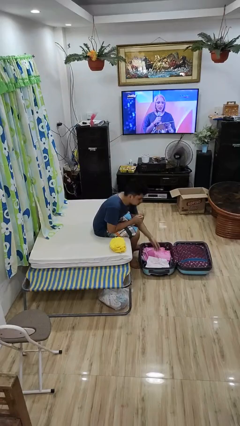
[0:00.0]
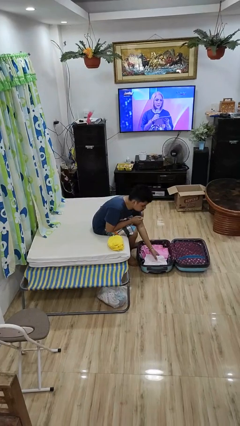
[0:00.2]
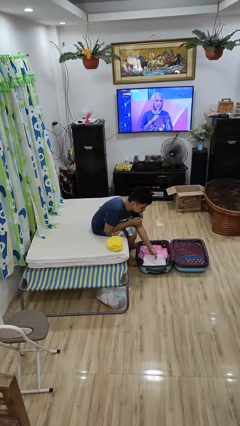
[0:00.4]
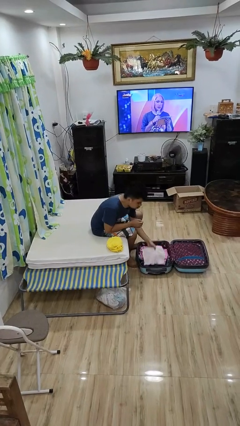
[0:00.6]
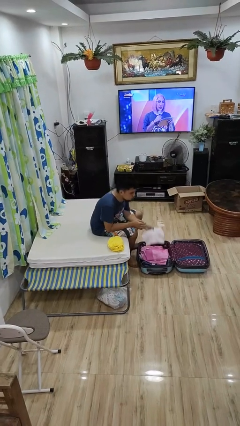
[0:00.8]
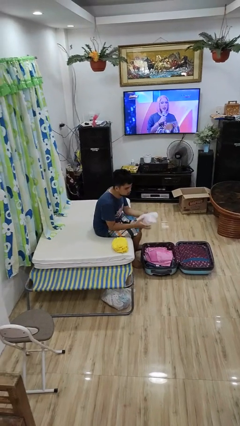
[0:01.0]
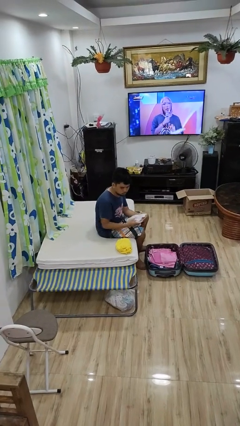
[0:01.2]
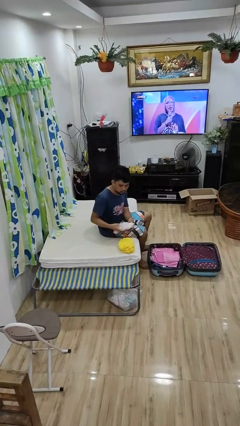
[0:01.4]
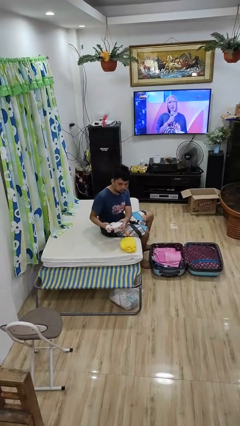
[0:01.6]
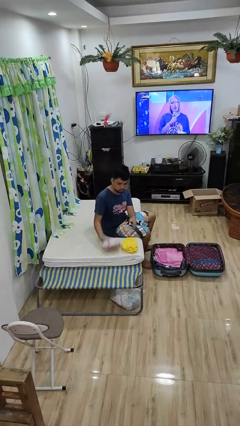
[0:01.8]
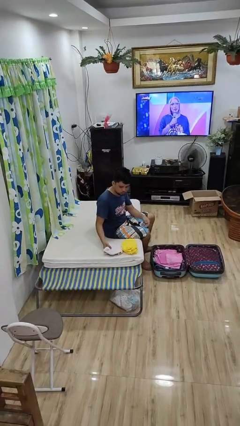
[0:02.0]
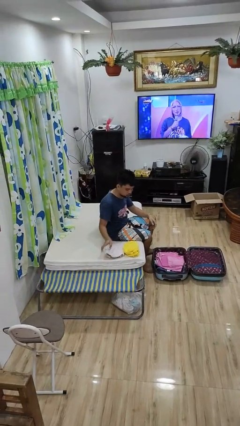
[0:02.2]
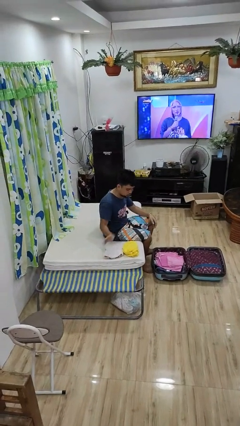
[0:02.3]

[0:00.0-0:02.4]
person unloads clothes from suitcase

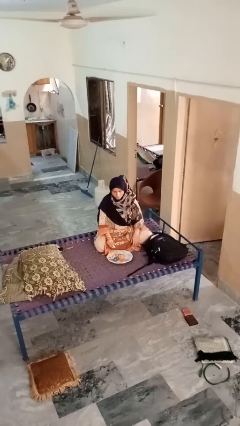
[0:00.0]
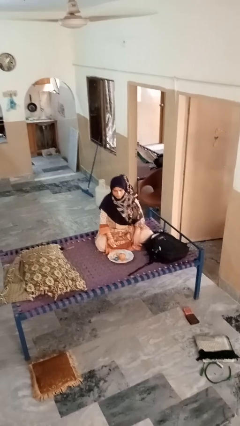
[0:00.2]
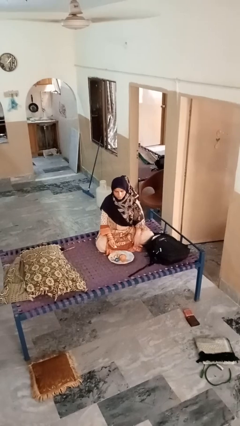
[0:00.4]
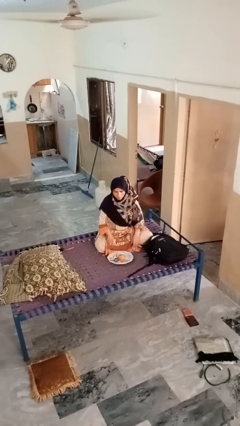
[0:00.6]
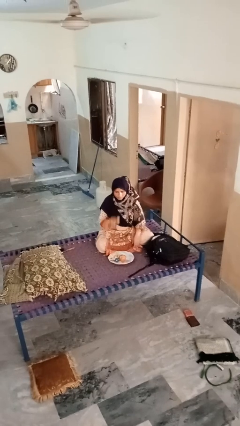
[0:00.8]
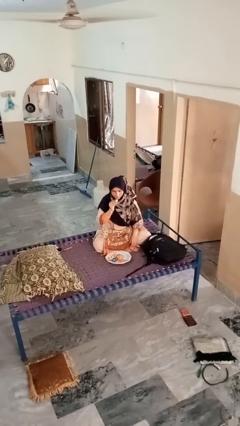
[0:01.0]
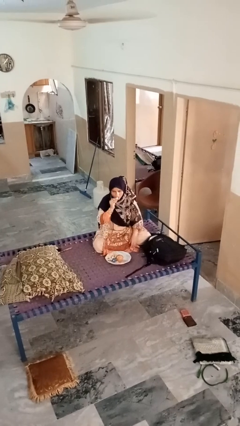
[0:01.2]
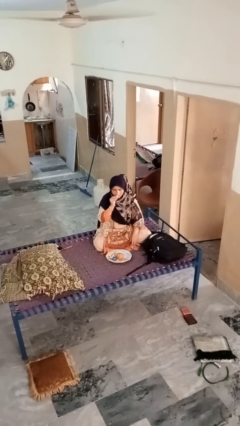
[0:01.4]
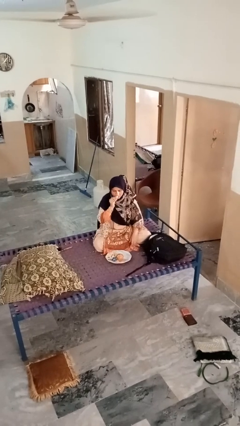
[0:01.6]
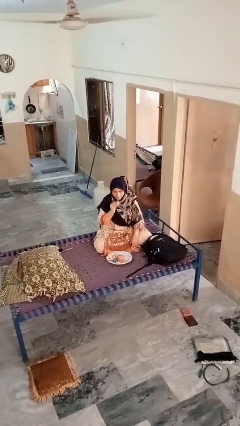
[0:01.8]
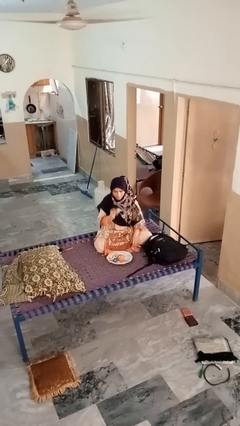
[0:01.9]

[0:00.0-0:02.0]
person eats apple

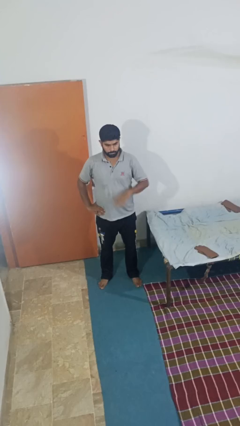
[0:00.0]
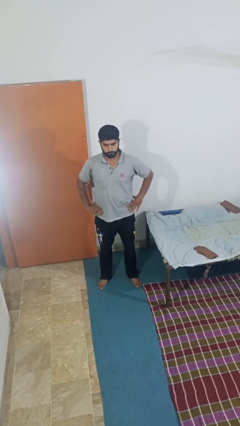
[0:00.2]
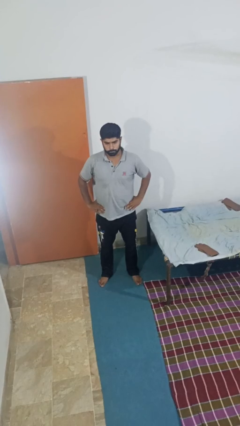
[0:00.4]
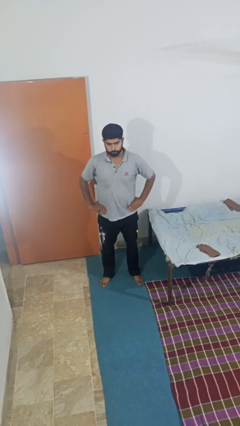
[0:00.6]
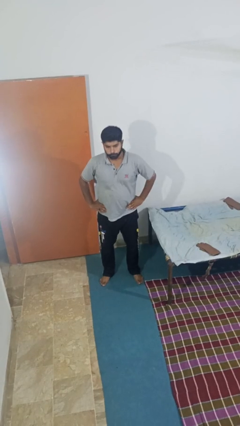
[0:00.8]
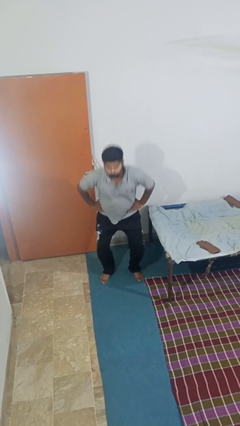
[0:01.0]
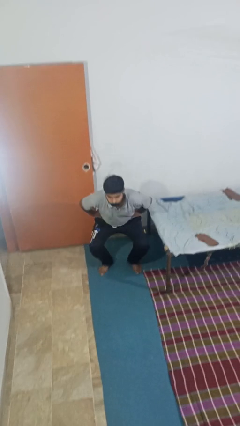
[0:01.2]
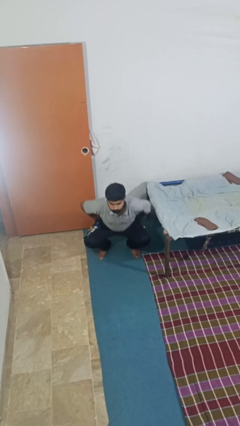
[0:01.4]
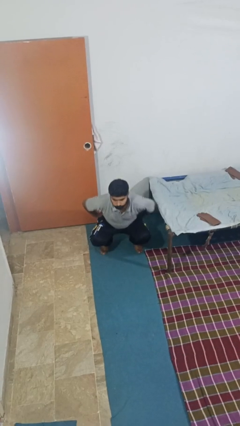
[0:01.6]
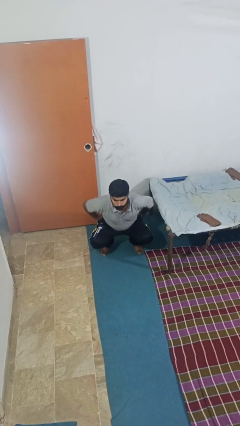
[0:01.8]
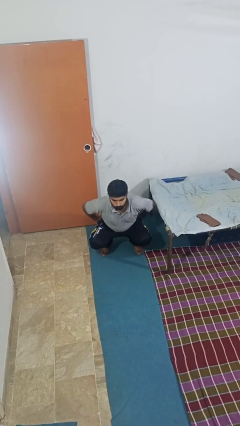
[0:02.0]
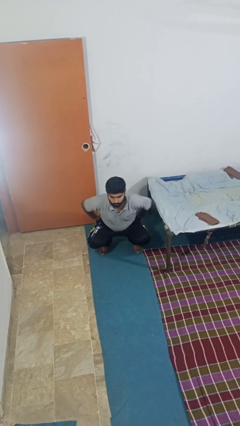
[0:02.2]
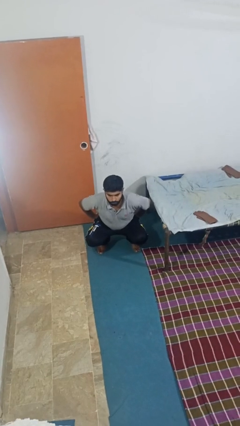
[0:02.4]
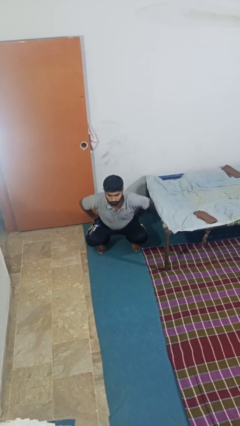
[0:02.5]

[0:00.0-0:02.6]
person squats

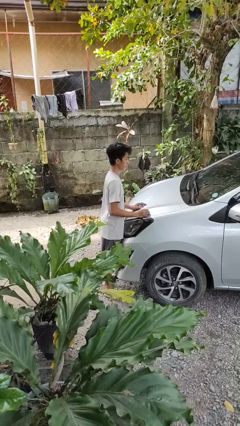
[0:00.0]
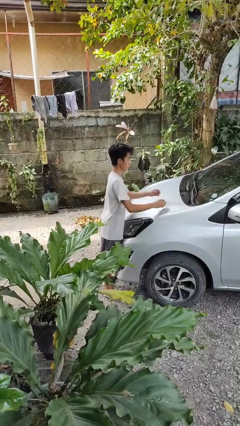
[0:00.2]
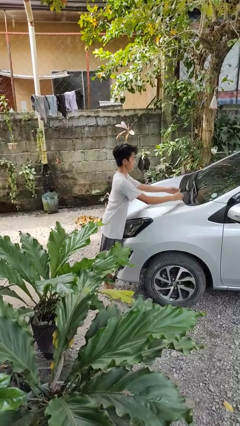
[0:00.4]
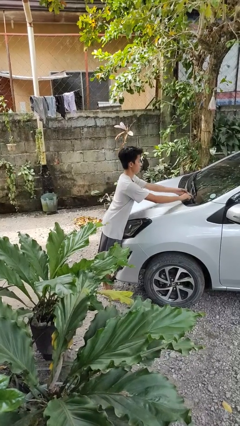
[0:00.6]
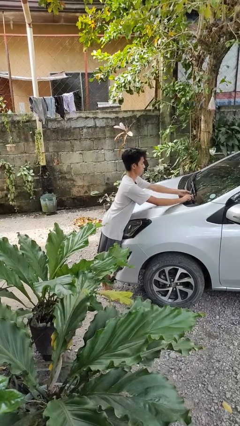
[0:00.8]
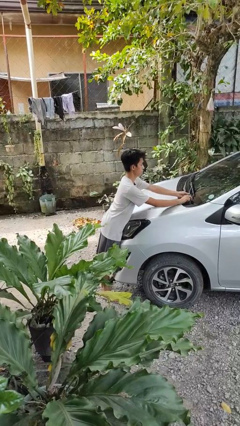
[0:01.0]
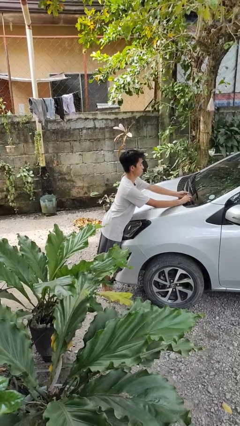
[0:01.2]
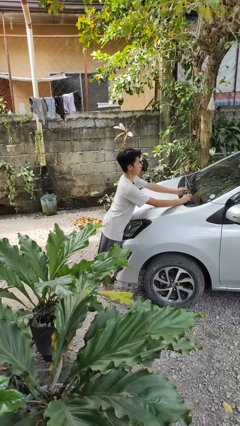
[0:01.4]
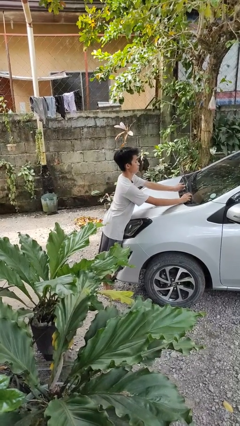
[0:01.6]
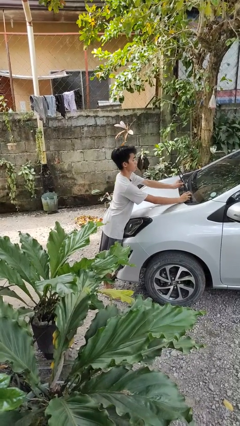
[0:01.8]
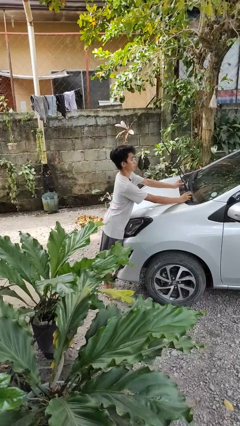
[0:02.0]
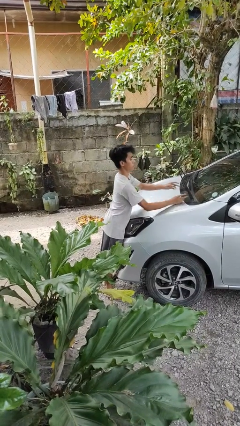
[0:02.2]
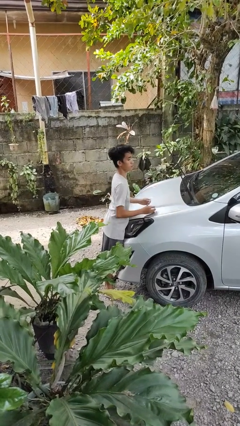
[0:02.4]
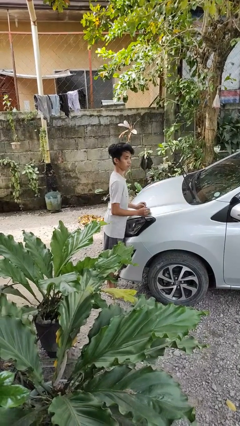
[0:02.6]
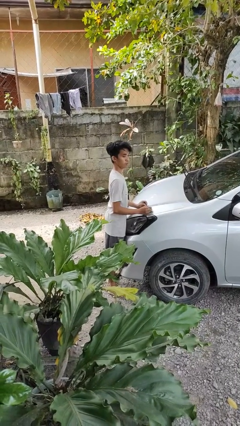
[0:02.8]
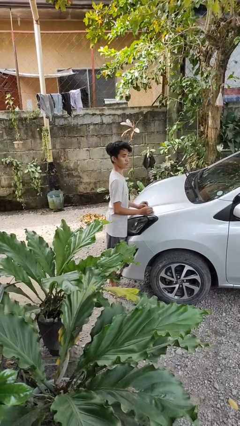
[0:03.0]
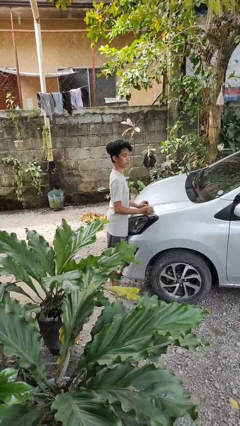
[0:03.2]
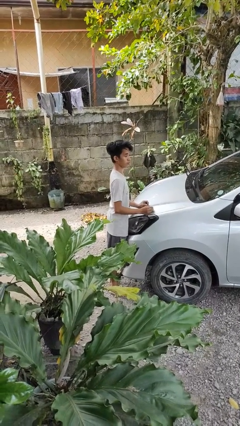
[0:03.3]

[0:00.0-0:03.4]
person flips up car wipers

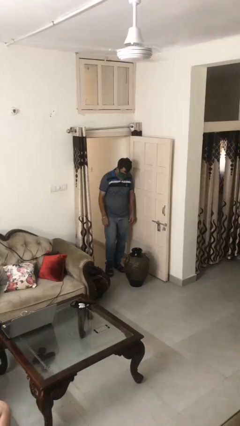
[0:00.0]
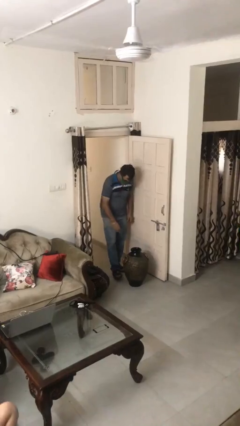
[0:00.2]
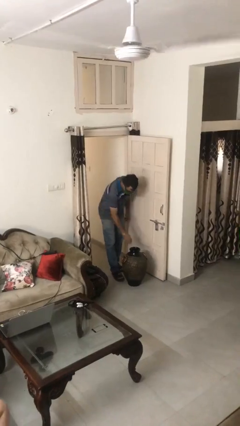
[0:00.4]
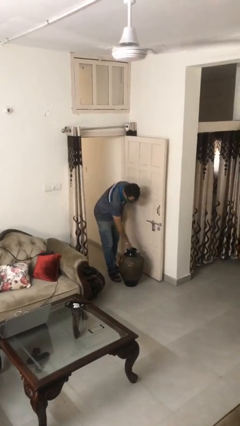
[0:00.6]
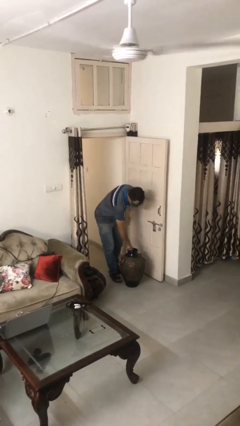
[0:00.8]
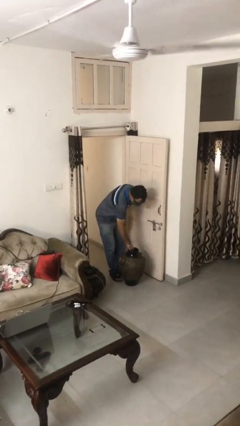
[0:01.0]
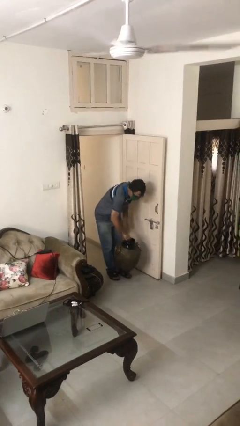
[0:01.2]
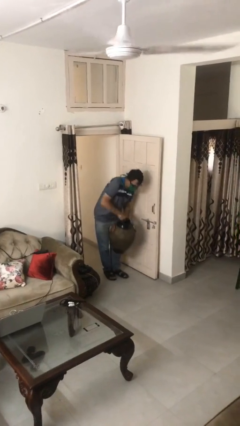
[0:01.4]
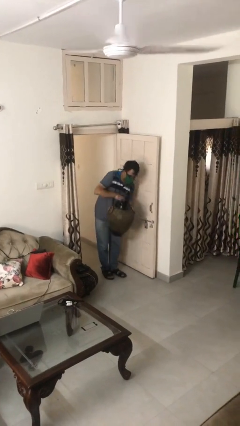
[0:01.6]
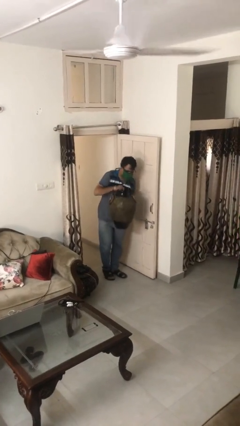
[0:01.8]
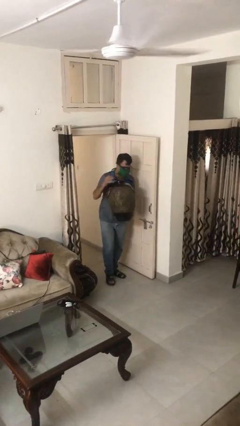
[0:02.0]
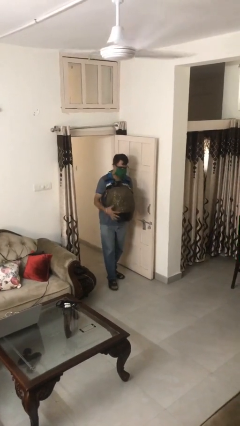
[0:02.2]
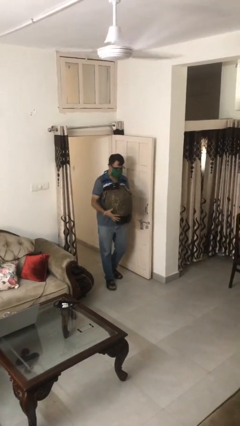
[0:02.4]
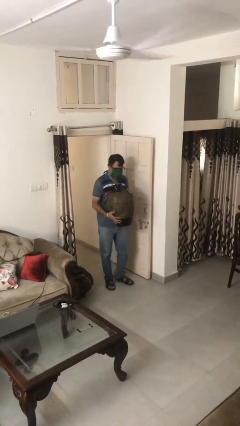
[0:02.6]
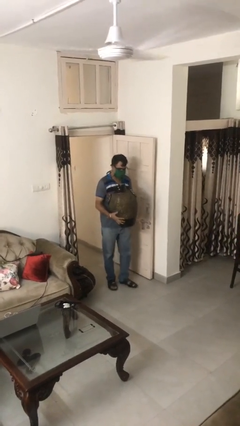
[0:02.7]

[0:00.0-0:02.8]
person picks up object from floor

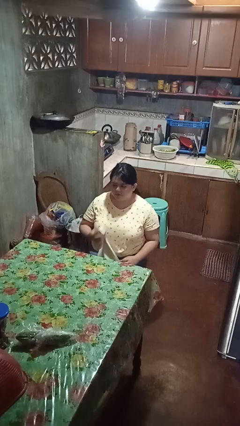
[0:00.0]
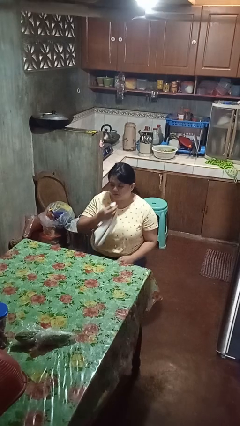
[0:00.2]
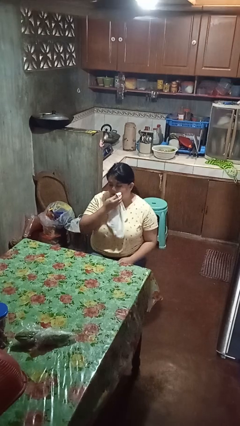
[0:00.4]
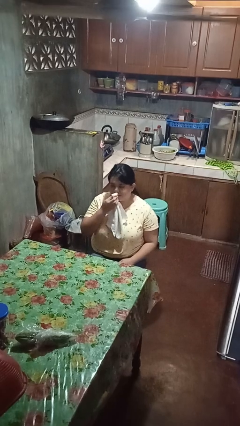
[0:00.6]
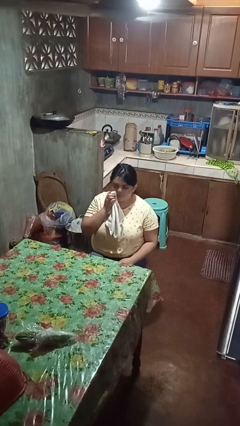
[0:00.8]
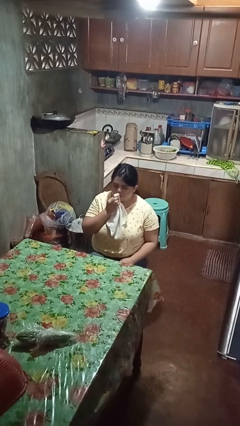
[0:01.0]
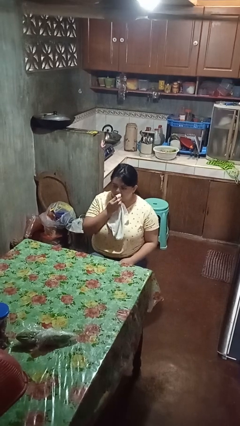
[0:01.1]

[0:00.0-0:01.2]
person wipes mouth with napkin

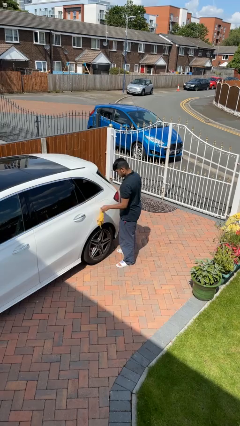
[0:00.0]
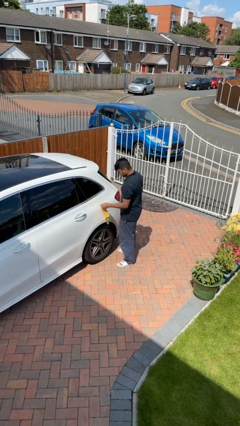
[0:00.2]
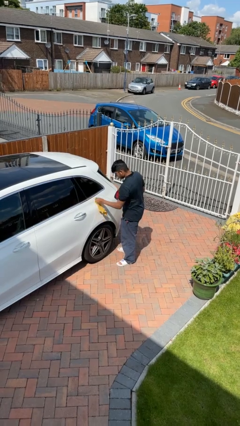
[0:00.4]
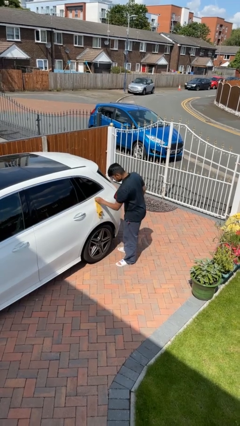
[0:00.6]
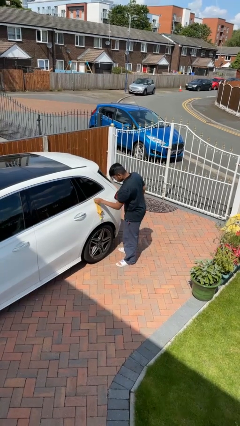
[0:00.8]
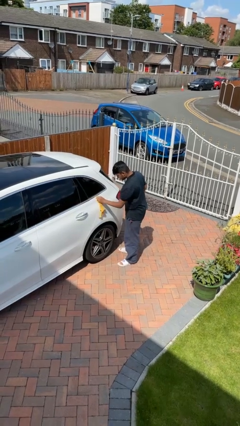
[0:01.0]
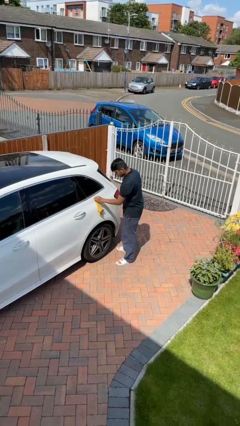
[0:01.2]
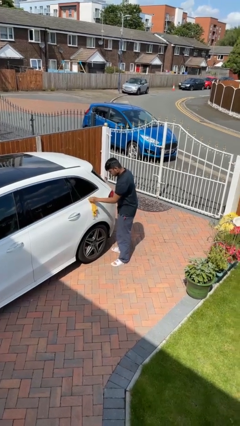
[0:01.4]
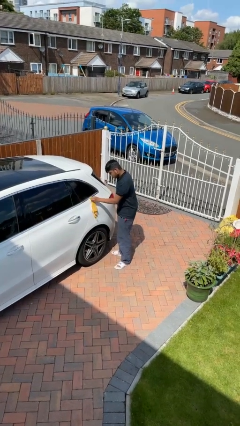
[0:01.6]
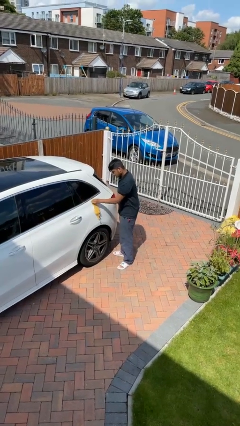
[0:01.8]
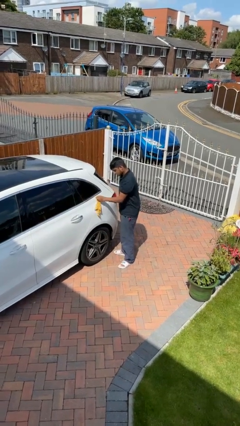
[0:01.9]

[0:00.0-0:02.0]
person polishes car with rag

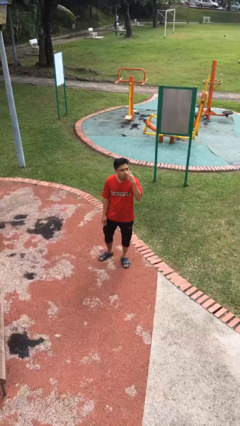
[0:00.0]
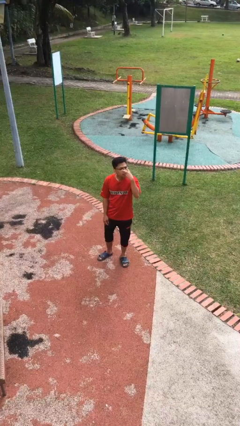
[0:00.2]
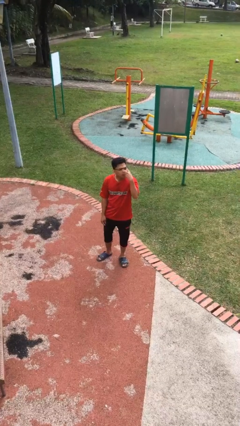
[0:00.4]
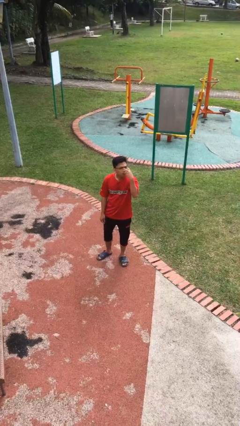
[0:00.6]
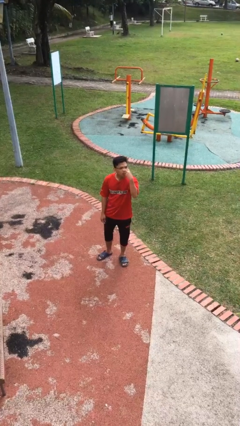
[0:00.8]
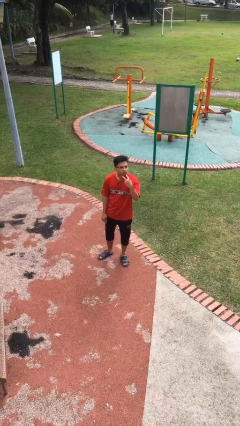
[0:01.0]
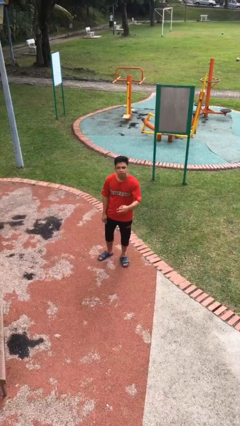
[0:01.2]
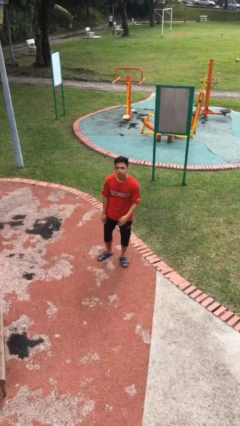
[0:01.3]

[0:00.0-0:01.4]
person gestures watch closely
